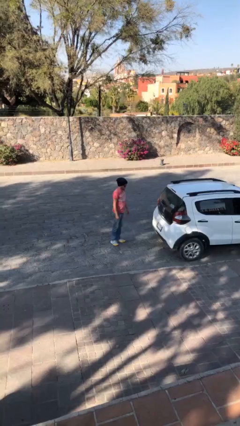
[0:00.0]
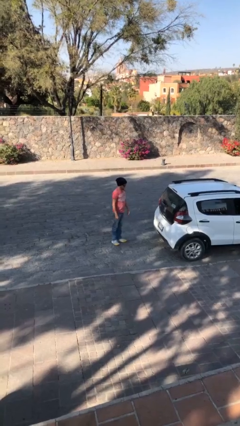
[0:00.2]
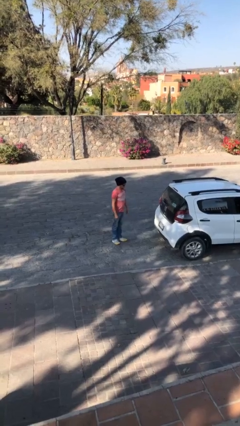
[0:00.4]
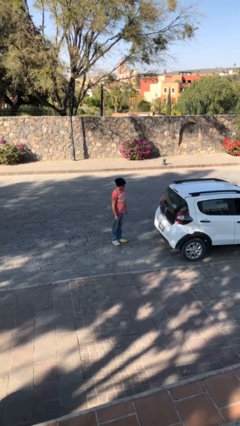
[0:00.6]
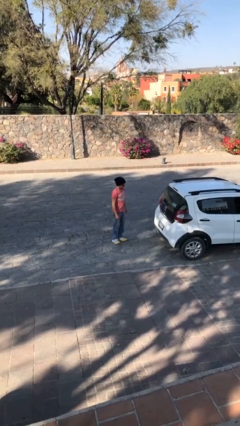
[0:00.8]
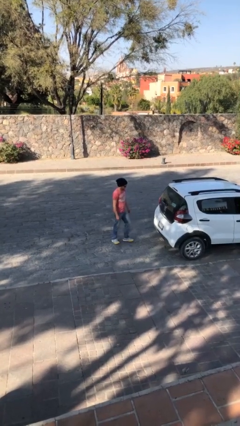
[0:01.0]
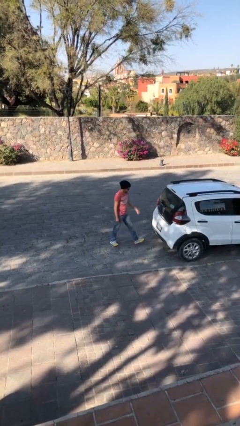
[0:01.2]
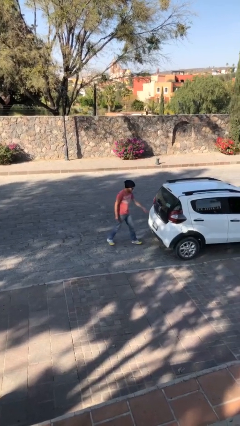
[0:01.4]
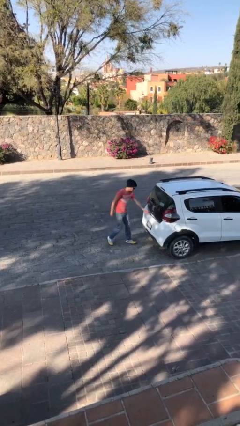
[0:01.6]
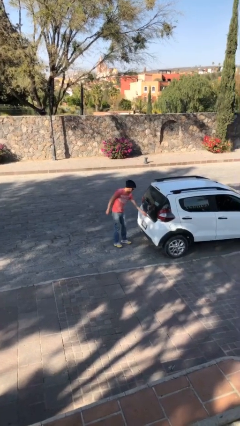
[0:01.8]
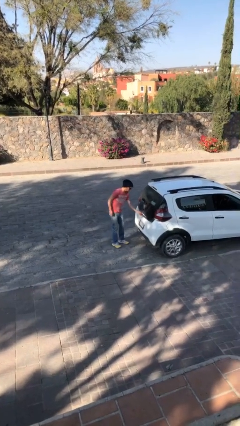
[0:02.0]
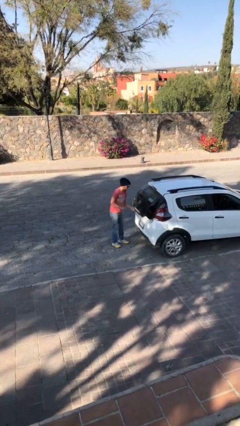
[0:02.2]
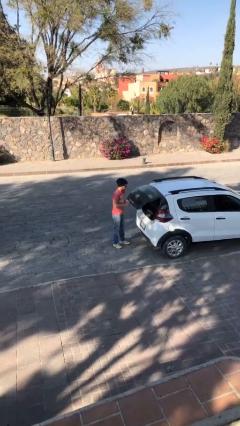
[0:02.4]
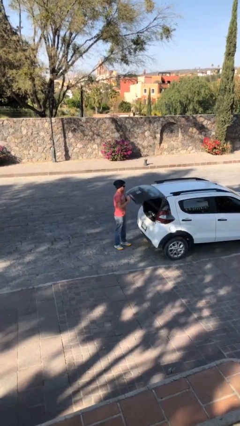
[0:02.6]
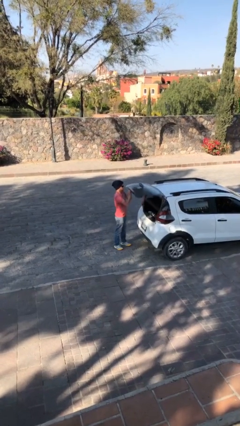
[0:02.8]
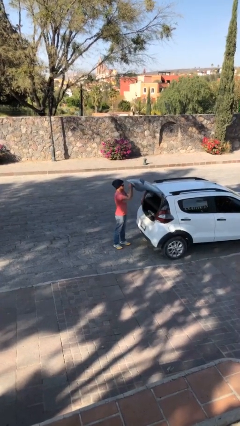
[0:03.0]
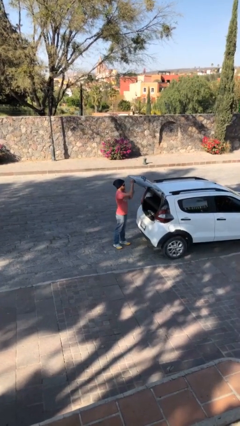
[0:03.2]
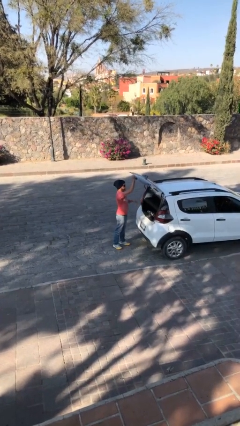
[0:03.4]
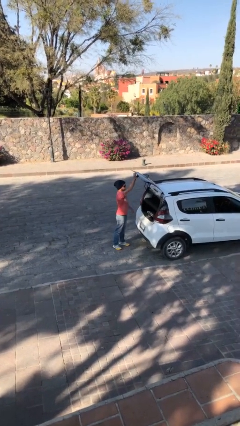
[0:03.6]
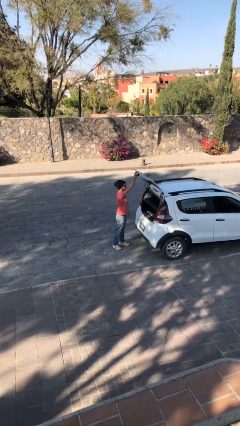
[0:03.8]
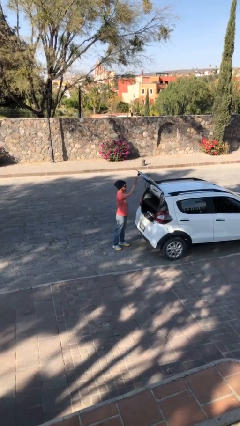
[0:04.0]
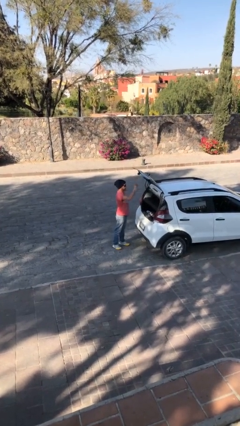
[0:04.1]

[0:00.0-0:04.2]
person opens car trunk

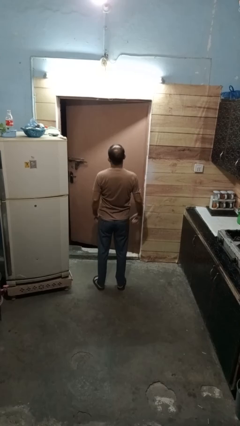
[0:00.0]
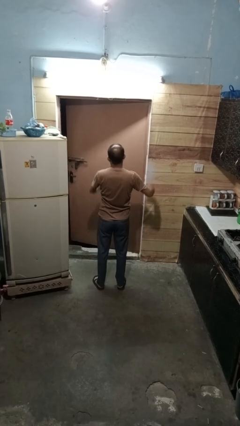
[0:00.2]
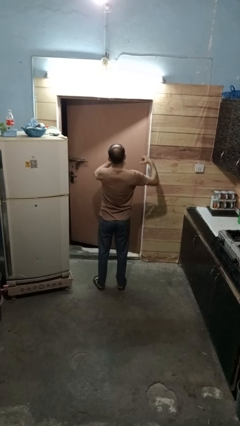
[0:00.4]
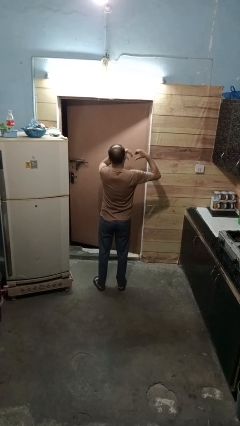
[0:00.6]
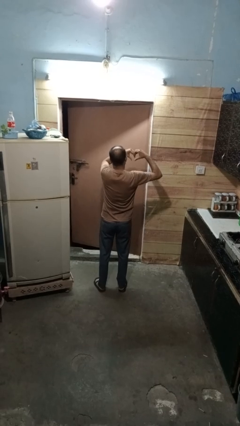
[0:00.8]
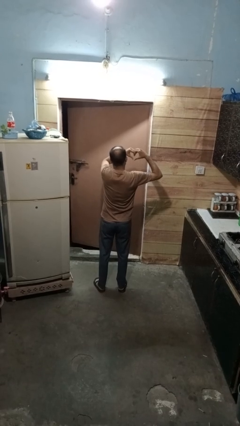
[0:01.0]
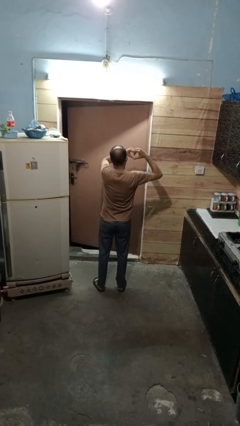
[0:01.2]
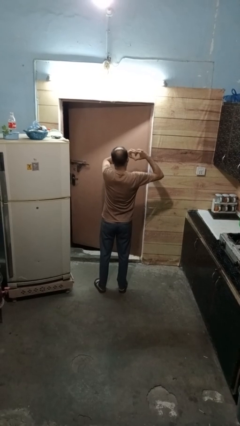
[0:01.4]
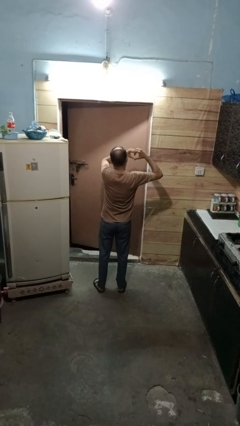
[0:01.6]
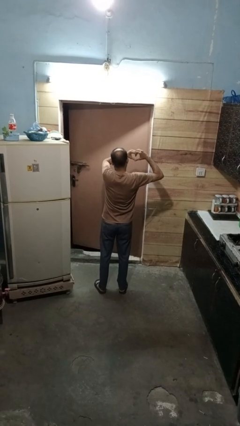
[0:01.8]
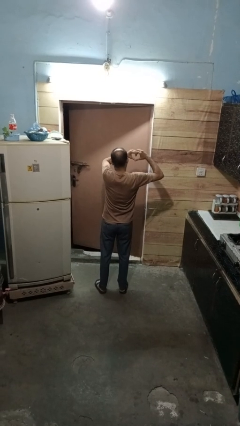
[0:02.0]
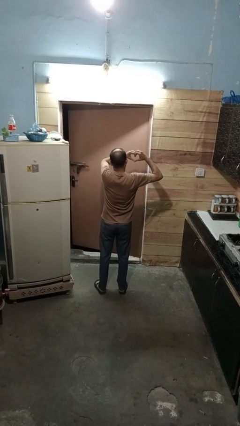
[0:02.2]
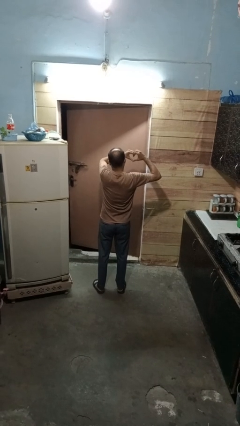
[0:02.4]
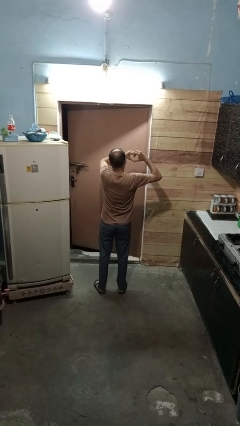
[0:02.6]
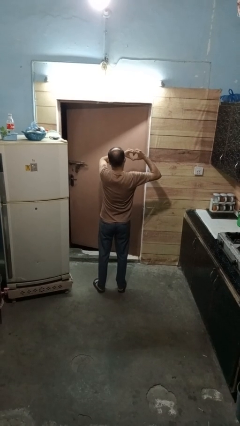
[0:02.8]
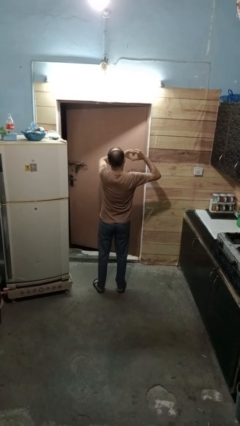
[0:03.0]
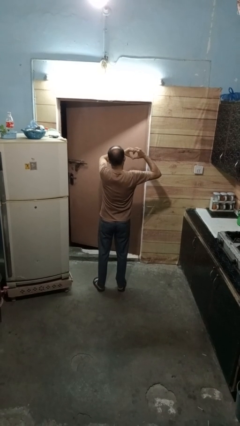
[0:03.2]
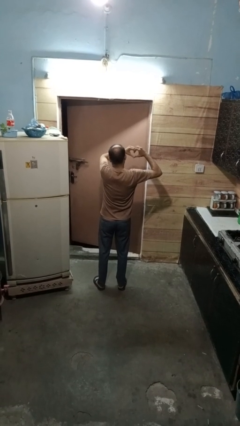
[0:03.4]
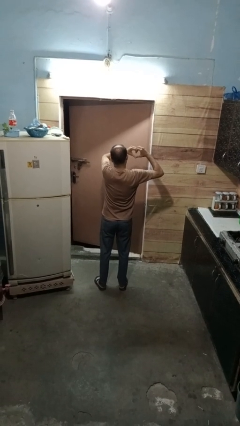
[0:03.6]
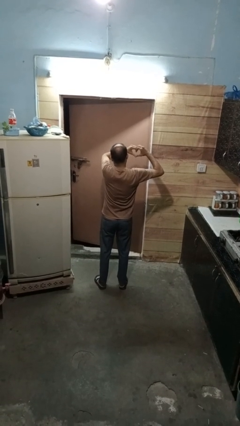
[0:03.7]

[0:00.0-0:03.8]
person gestures heart

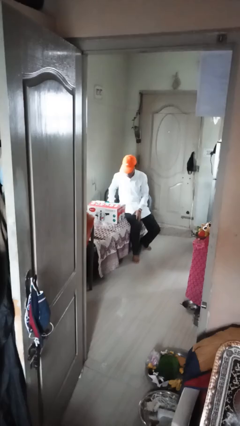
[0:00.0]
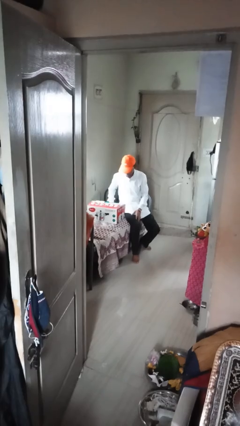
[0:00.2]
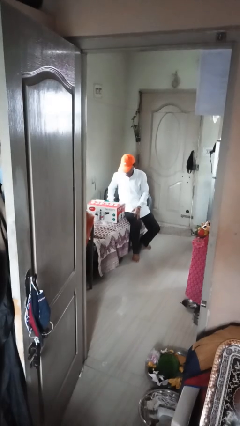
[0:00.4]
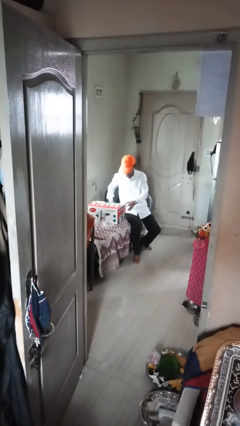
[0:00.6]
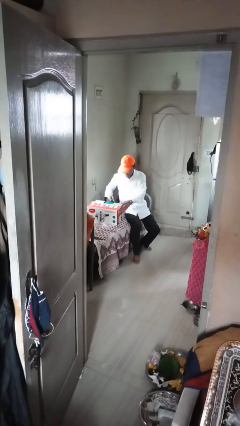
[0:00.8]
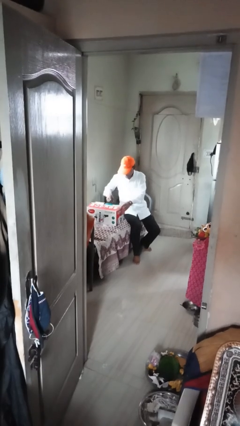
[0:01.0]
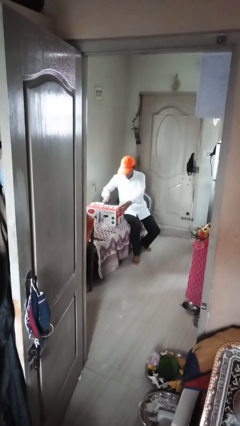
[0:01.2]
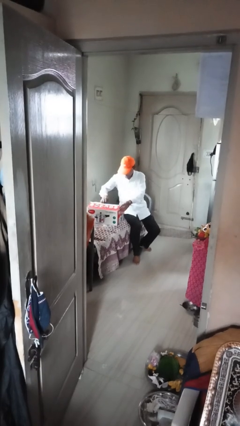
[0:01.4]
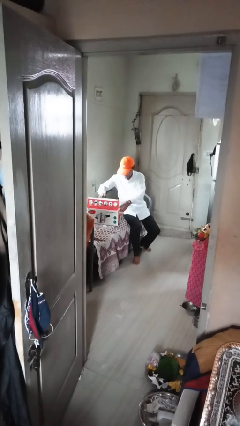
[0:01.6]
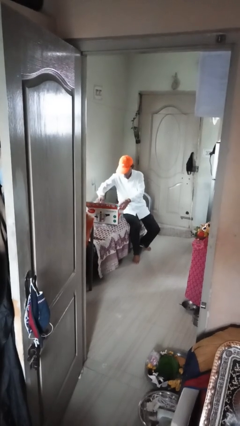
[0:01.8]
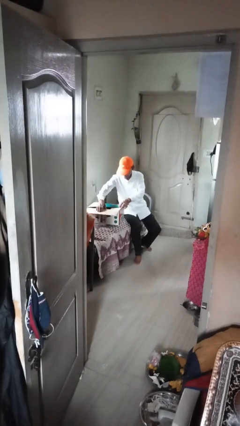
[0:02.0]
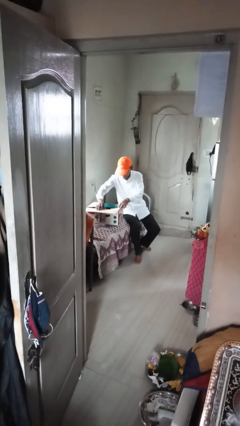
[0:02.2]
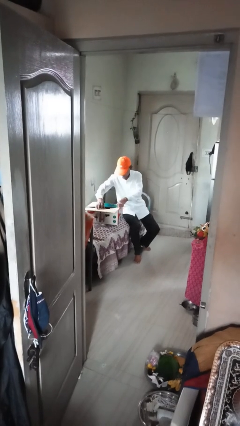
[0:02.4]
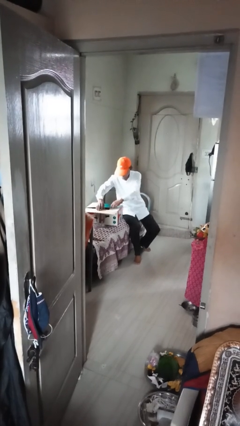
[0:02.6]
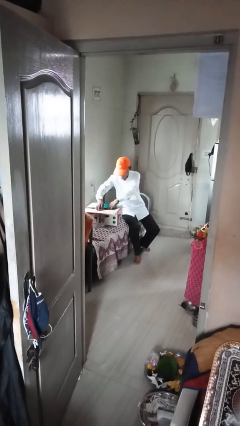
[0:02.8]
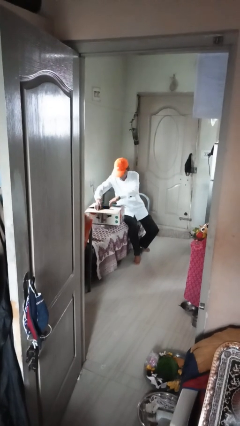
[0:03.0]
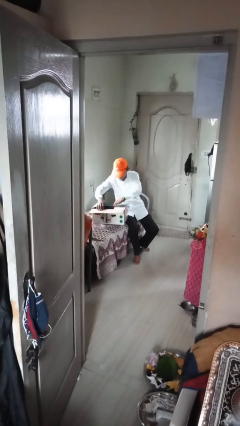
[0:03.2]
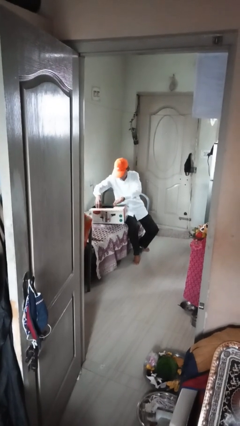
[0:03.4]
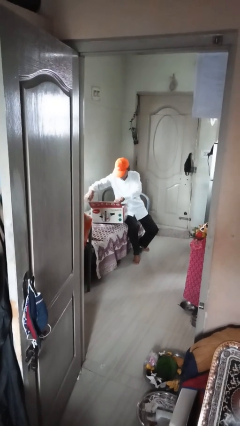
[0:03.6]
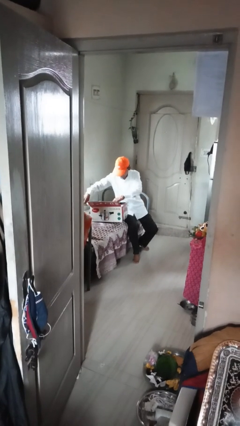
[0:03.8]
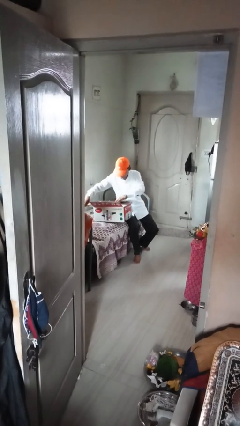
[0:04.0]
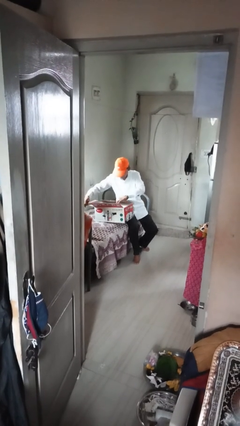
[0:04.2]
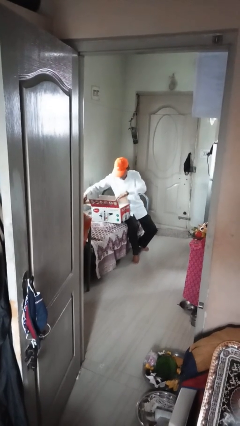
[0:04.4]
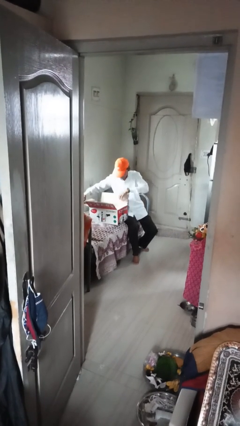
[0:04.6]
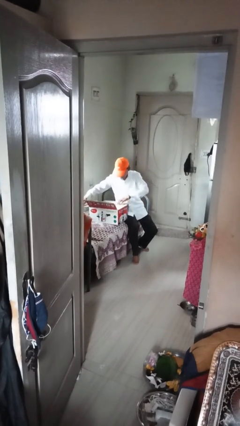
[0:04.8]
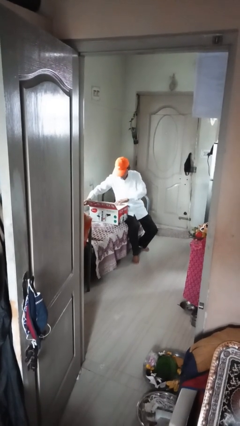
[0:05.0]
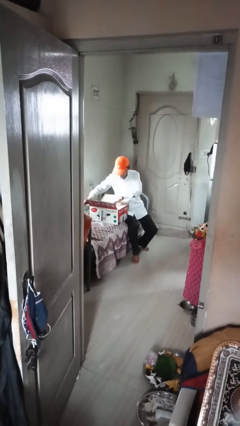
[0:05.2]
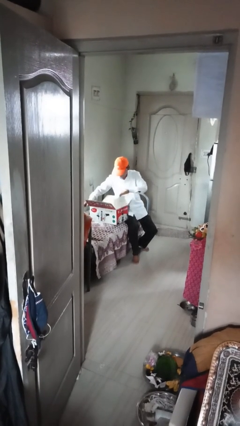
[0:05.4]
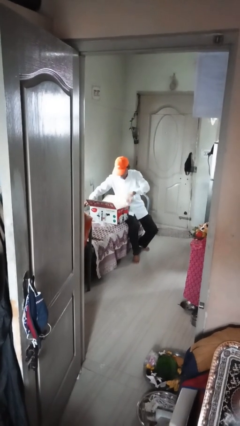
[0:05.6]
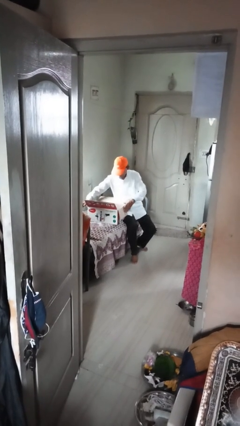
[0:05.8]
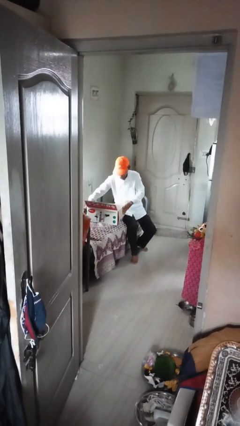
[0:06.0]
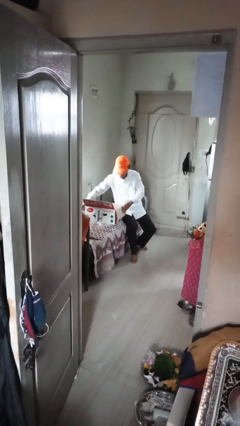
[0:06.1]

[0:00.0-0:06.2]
person opens box

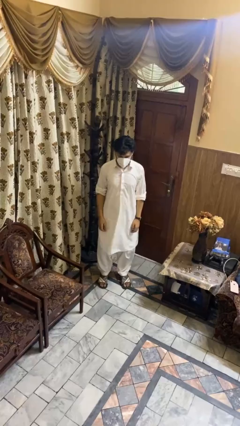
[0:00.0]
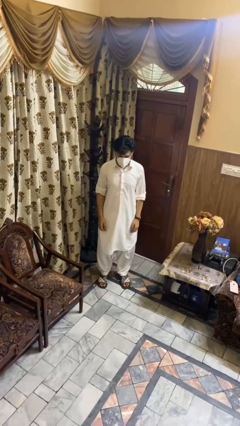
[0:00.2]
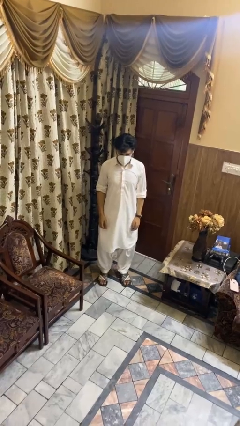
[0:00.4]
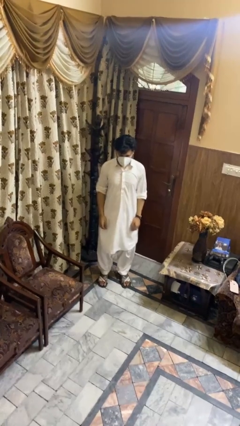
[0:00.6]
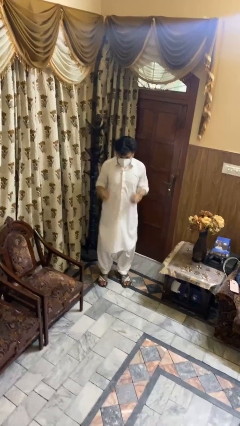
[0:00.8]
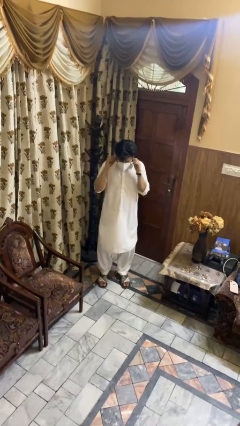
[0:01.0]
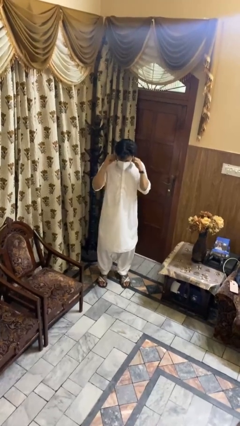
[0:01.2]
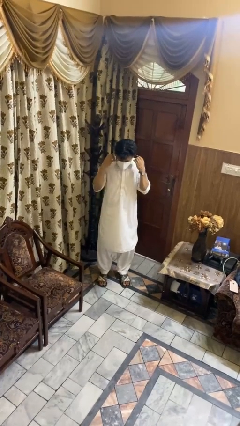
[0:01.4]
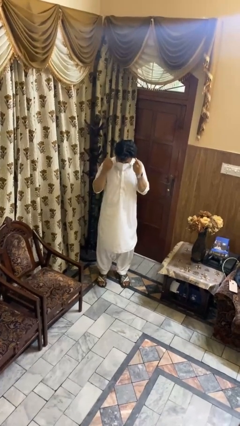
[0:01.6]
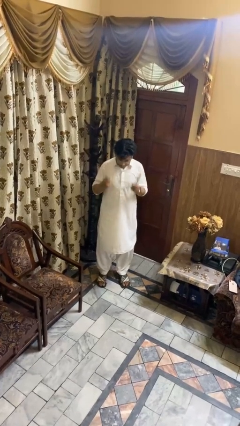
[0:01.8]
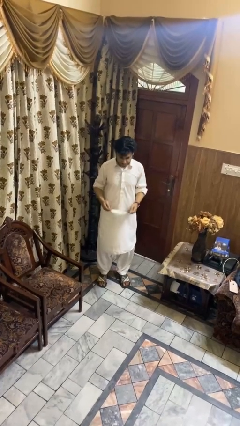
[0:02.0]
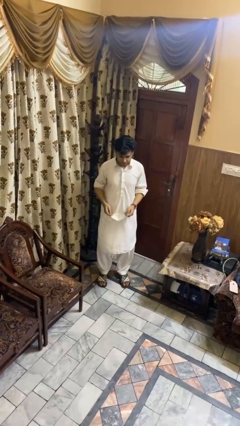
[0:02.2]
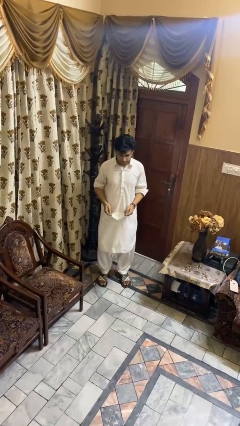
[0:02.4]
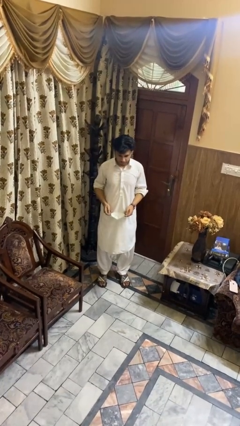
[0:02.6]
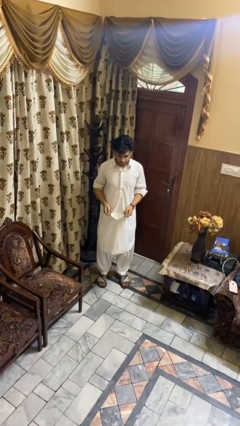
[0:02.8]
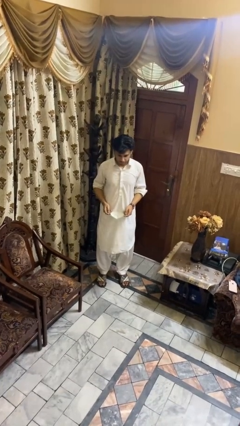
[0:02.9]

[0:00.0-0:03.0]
person takes off facemask

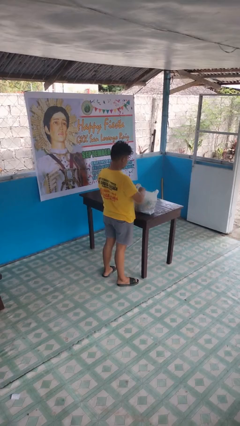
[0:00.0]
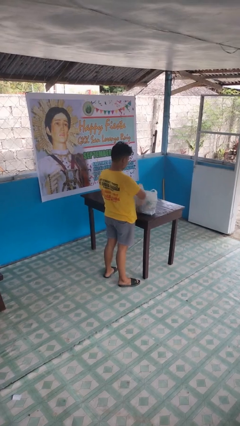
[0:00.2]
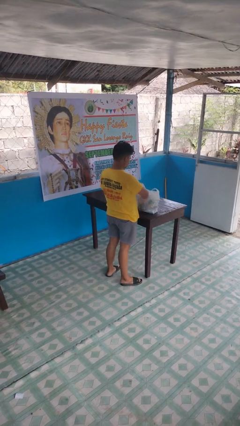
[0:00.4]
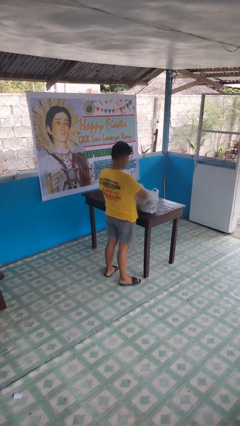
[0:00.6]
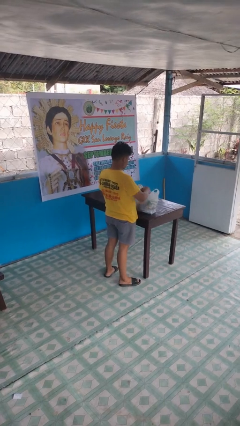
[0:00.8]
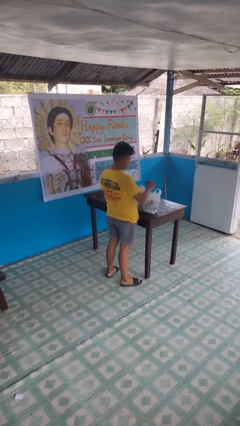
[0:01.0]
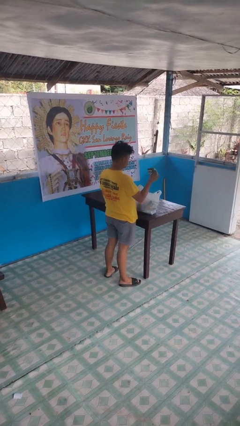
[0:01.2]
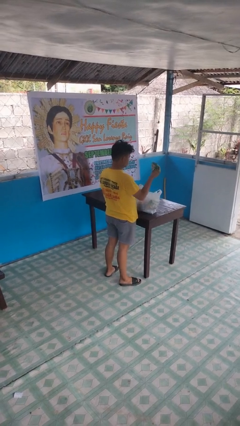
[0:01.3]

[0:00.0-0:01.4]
person takes object from bag
